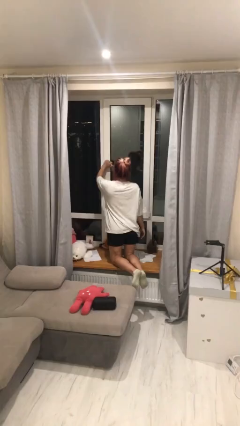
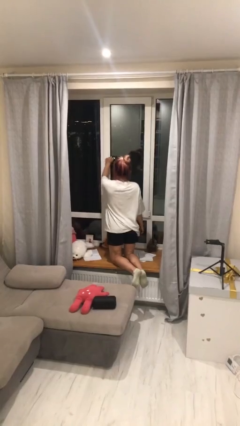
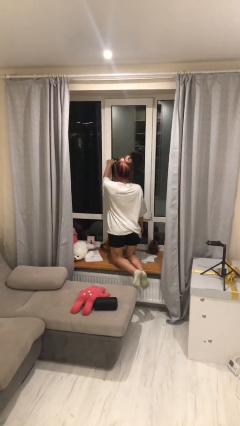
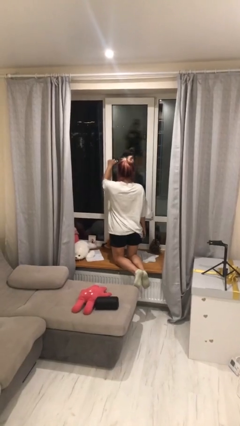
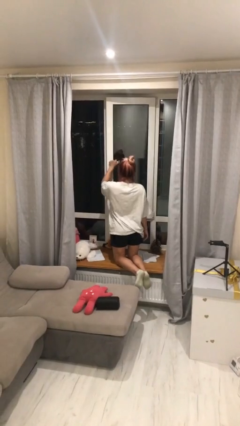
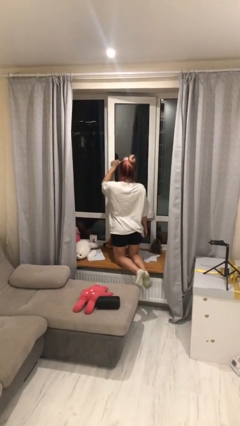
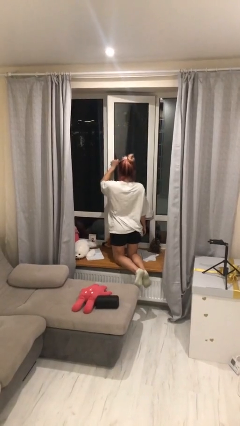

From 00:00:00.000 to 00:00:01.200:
person opens home window

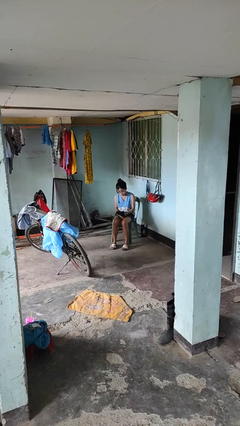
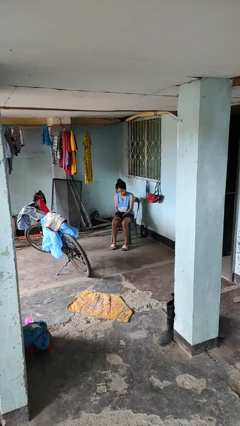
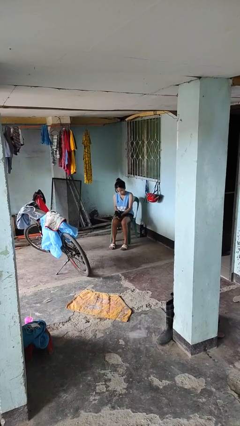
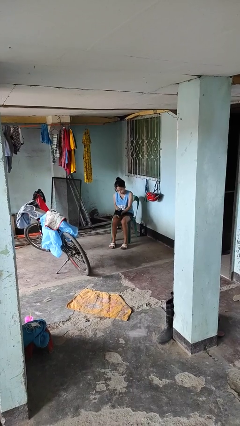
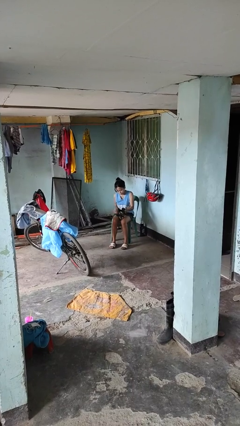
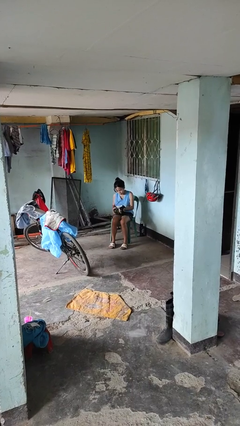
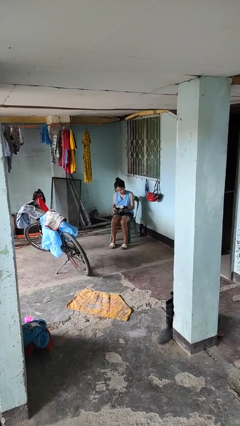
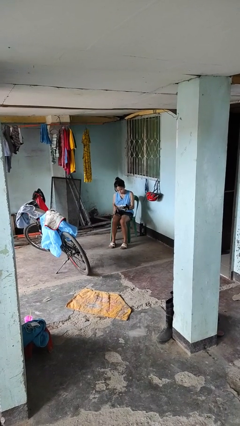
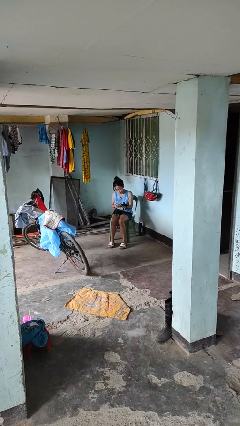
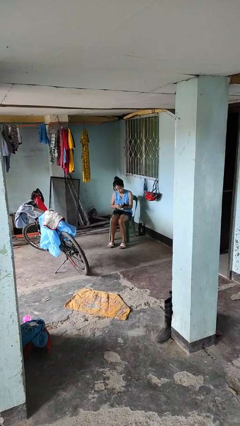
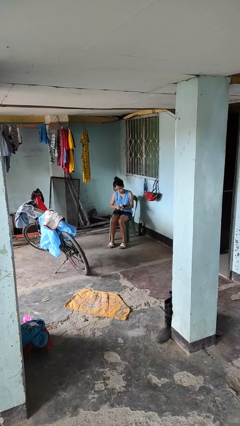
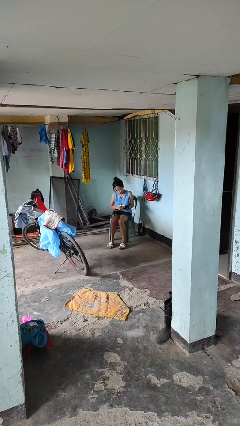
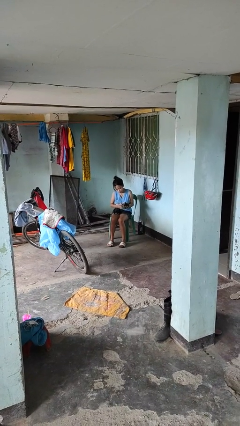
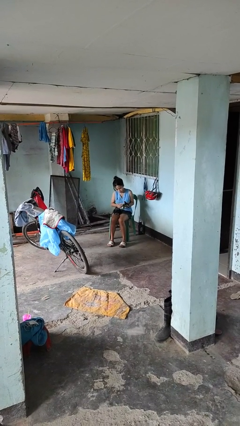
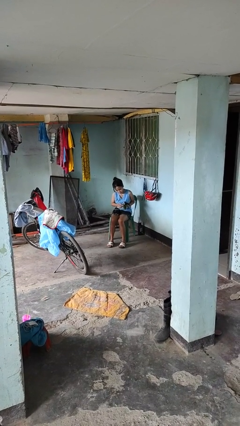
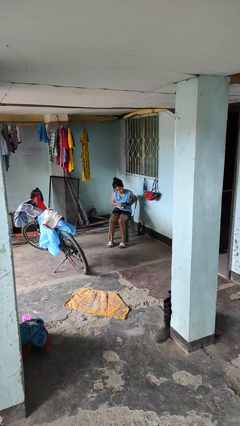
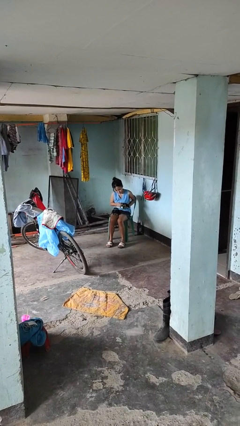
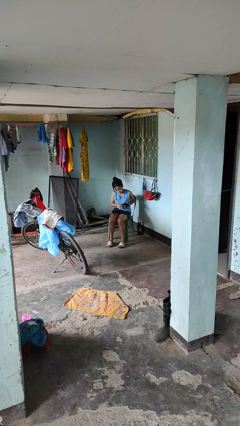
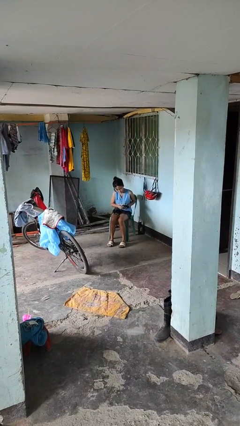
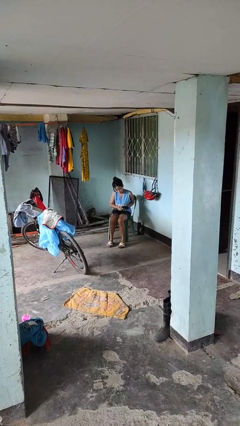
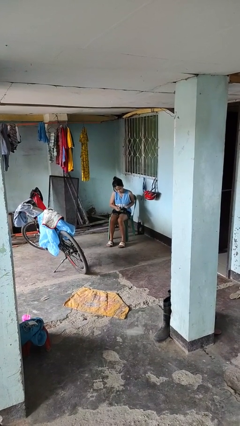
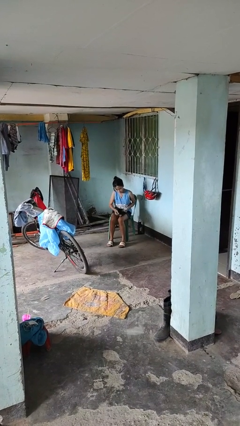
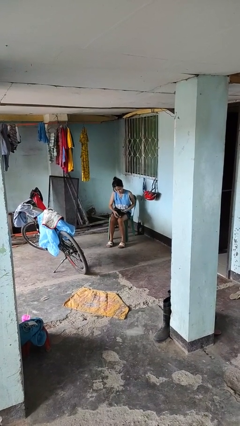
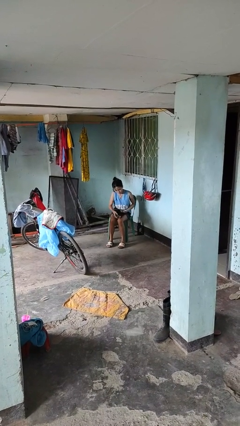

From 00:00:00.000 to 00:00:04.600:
person takes off gloves

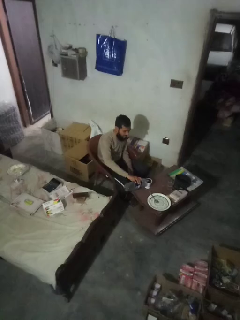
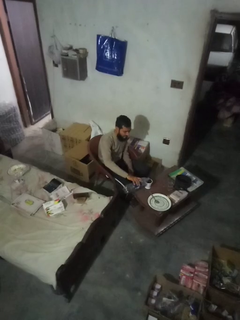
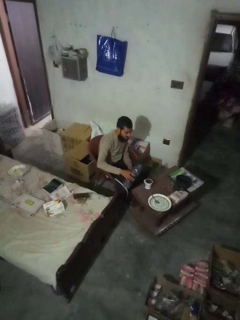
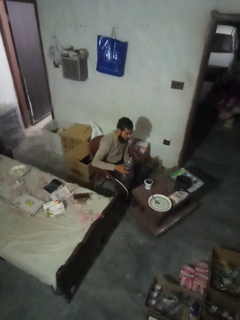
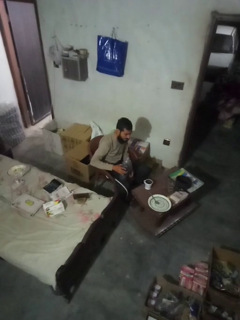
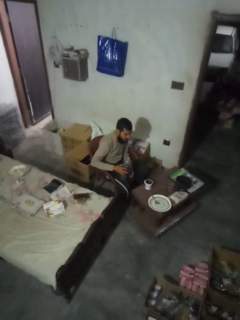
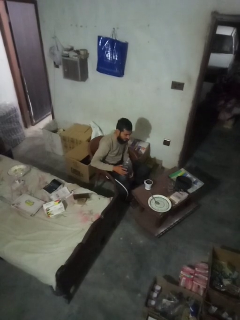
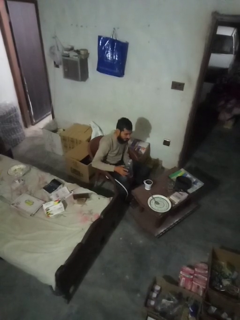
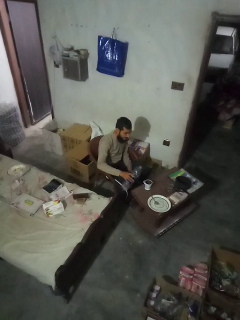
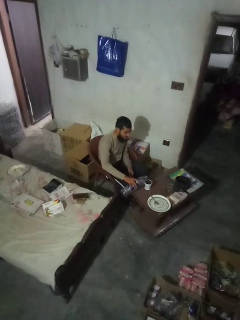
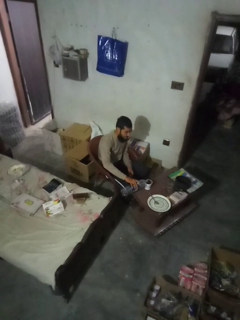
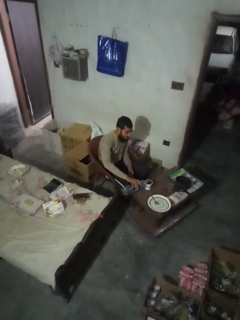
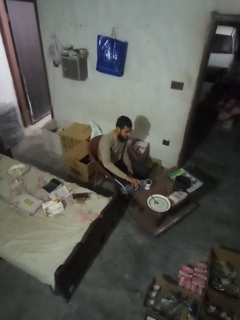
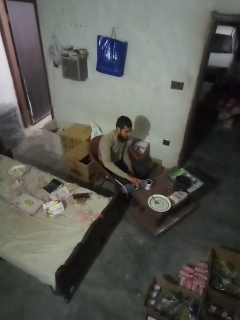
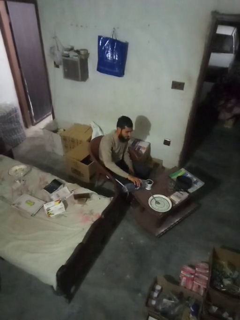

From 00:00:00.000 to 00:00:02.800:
person pours liquid into cup

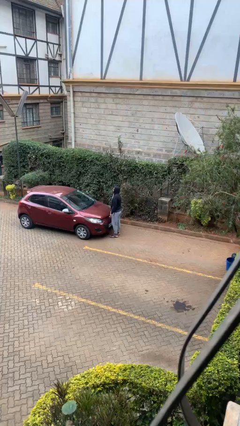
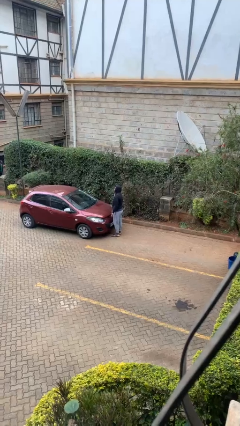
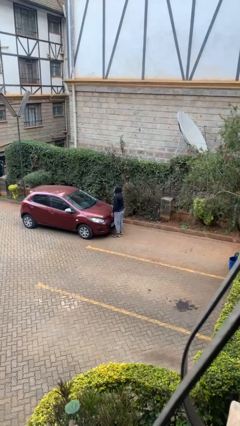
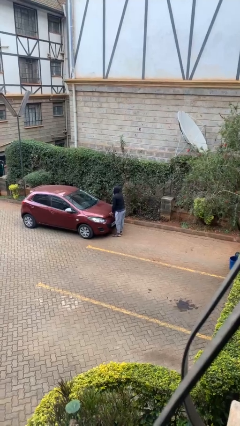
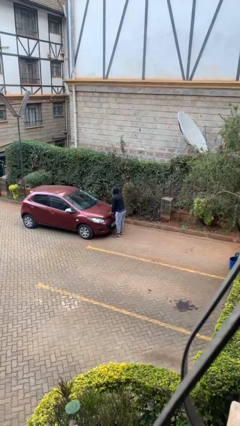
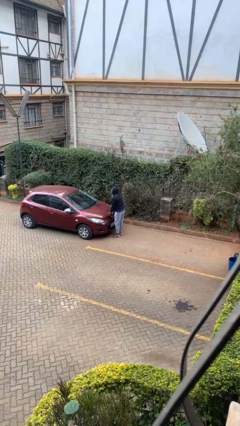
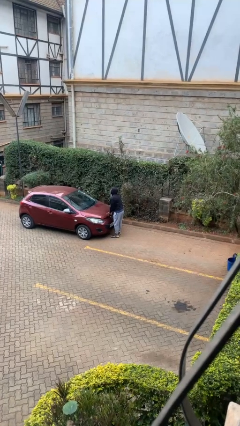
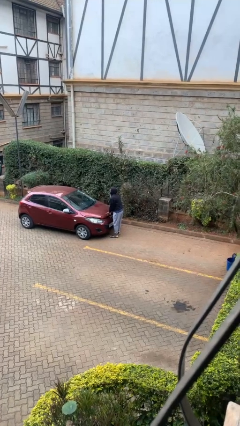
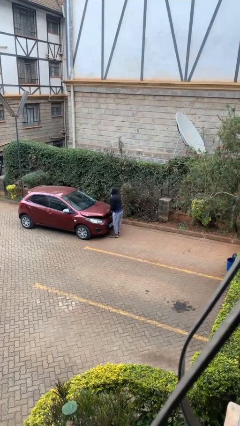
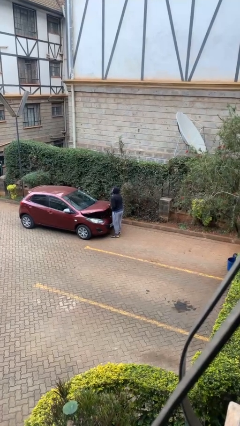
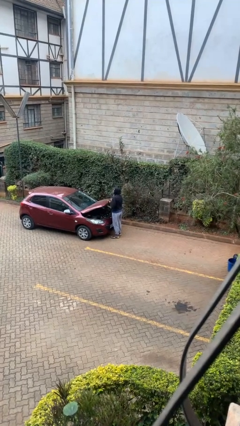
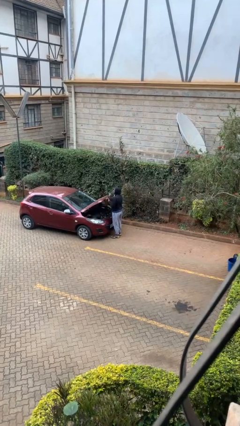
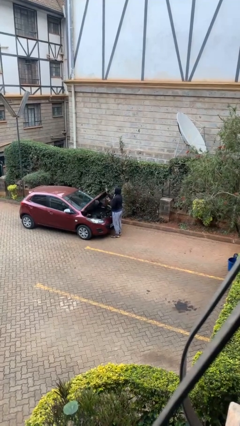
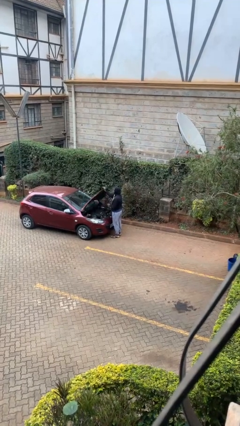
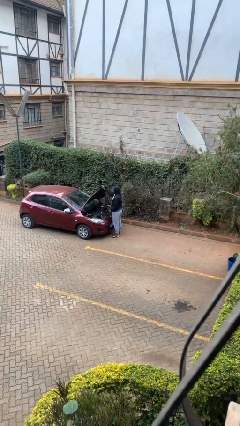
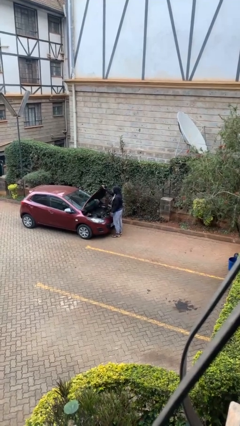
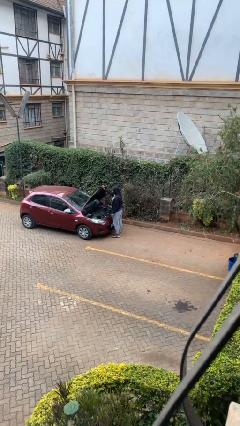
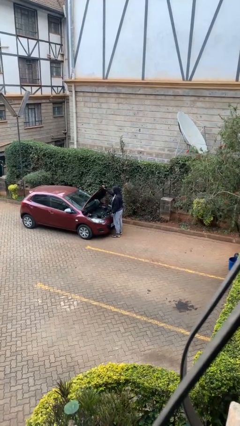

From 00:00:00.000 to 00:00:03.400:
person opens car hood

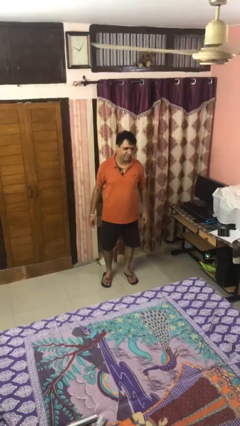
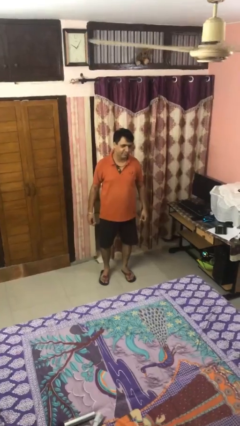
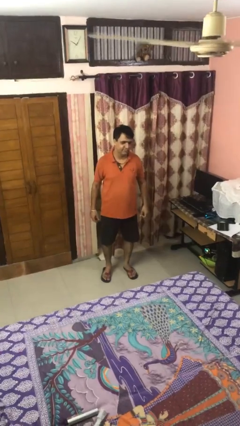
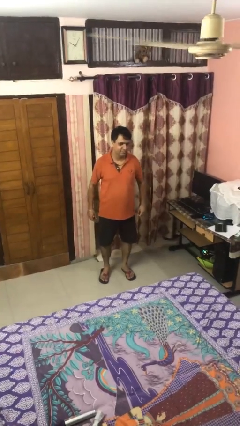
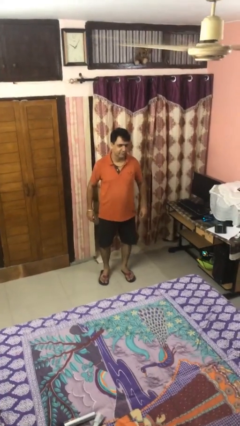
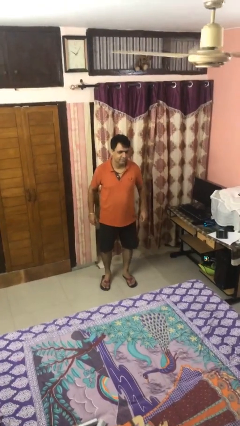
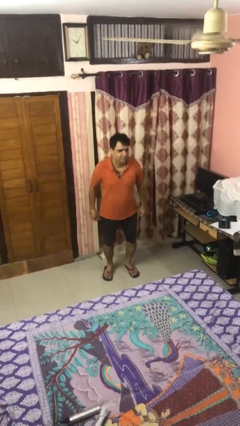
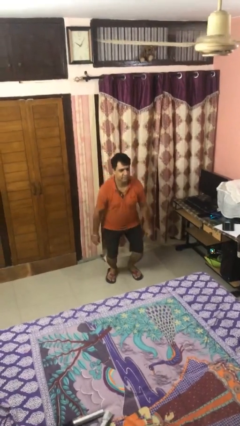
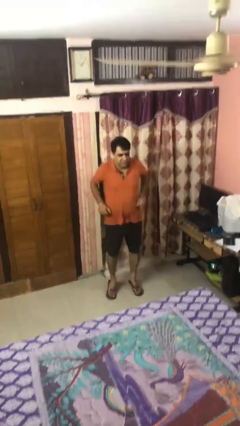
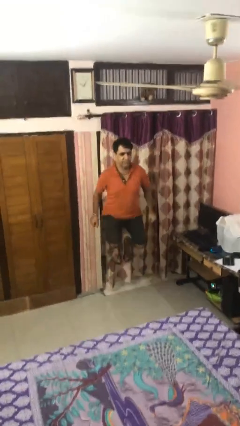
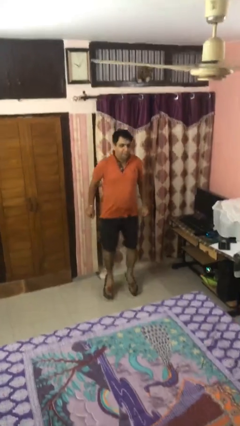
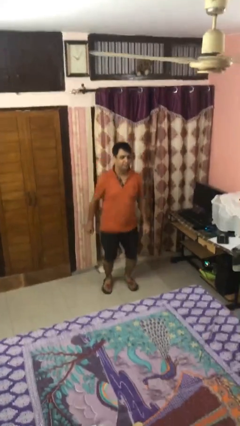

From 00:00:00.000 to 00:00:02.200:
person jumps

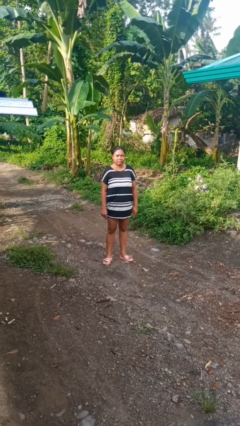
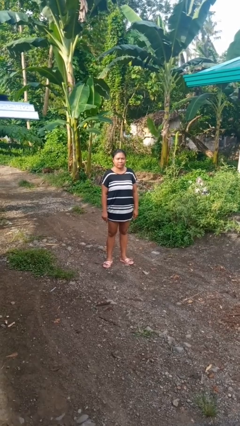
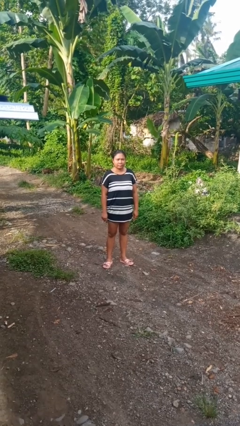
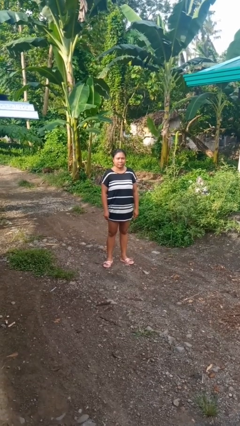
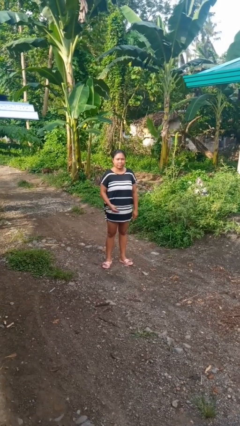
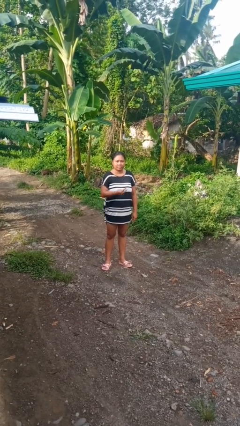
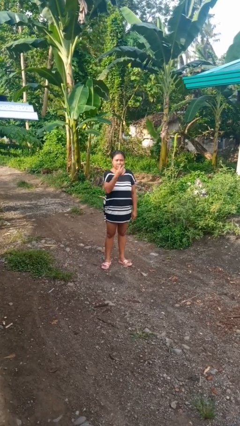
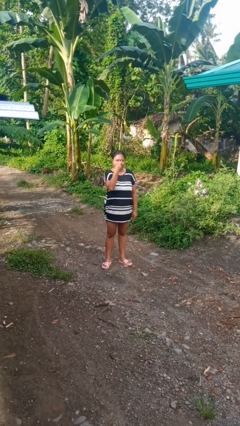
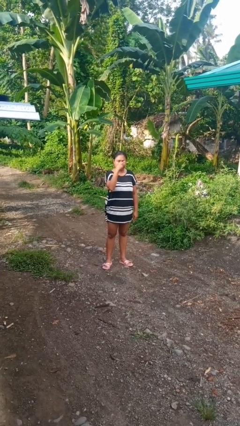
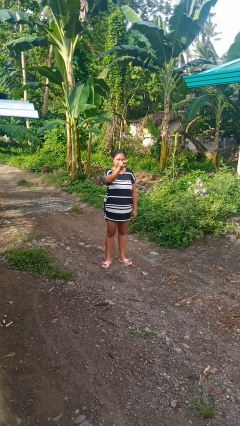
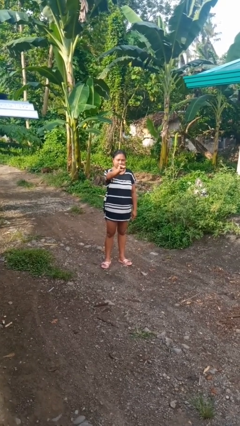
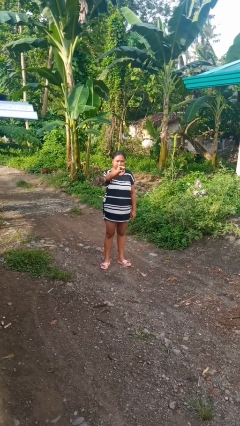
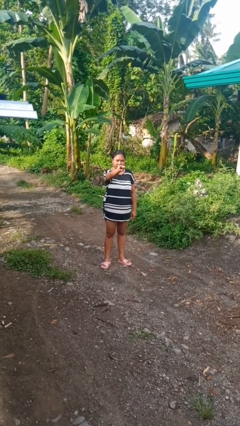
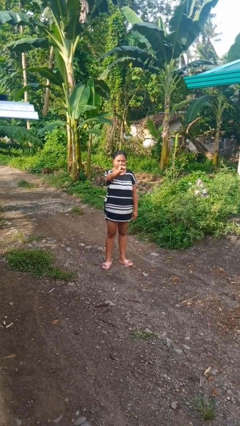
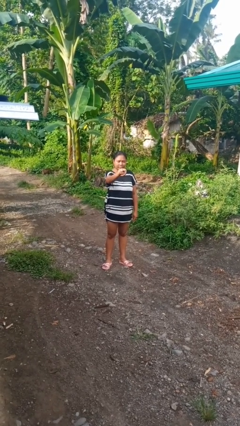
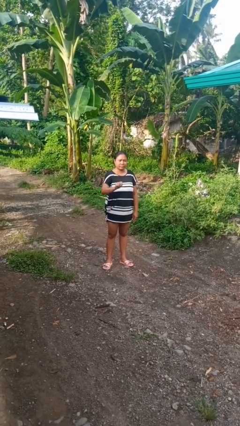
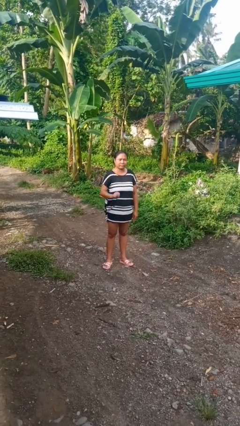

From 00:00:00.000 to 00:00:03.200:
person gestures watch closely

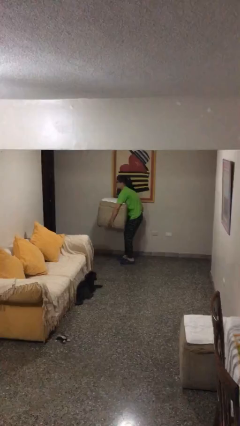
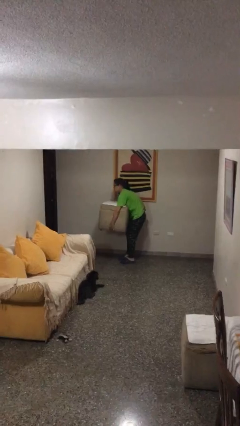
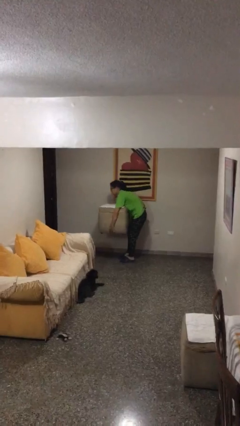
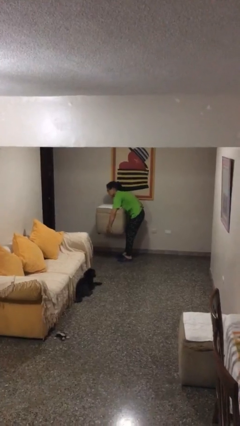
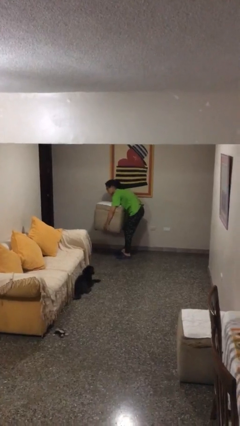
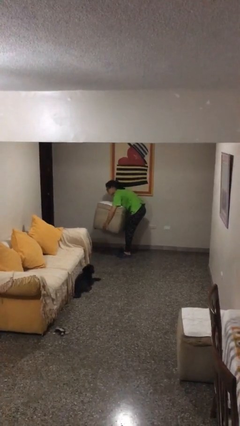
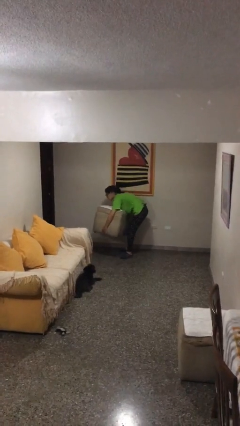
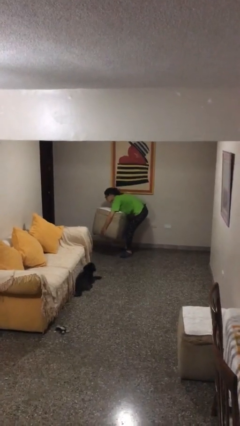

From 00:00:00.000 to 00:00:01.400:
person puts down object on floor
